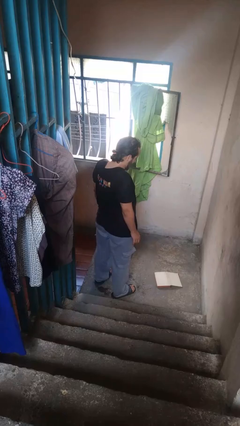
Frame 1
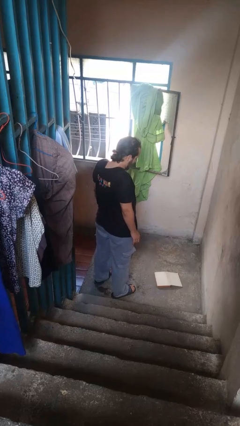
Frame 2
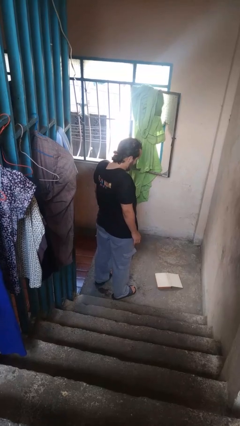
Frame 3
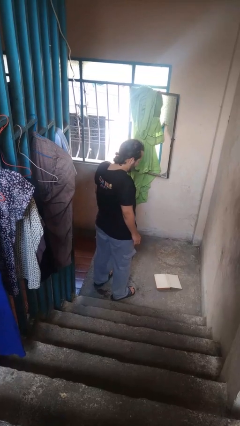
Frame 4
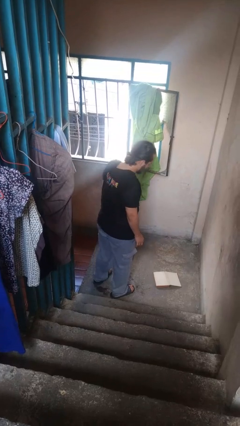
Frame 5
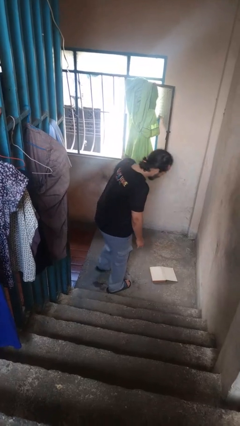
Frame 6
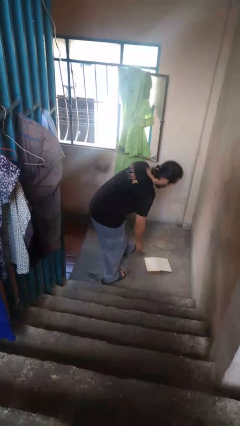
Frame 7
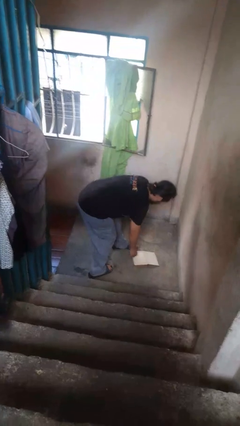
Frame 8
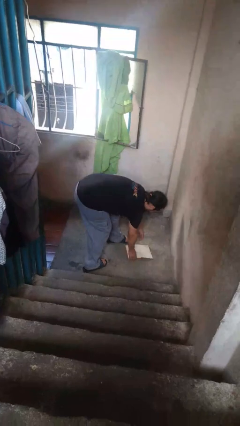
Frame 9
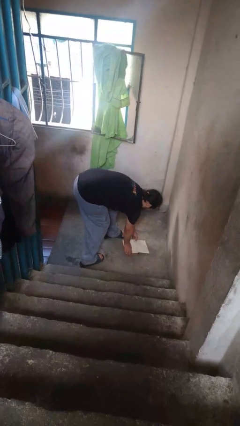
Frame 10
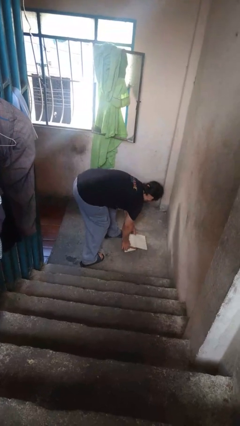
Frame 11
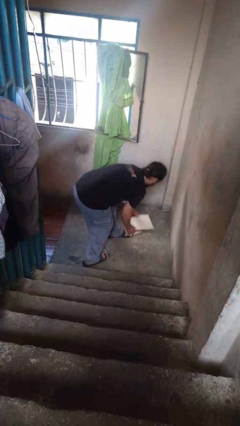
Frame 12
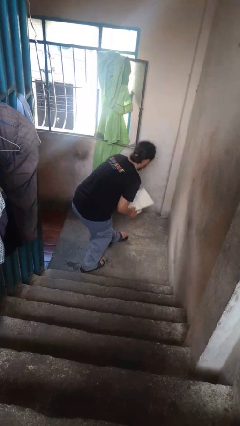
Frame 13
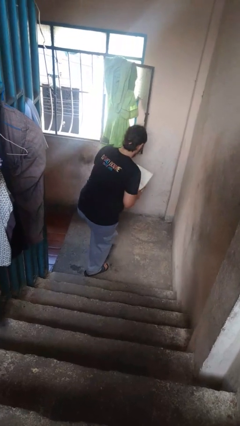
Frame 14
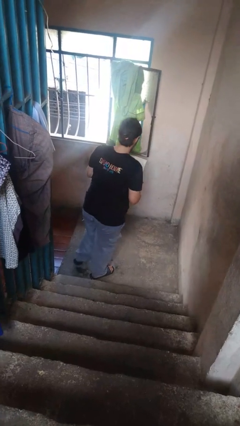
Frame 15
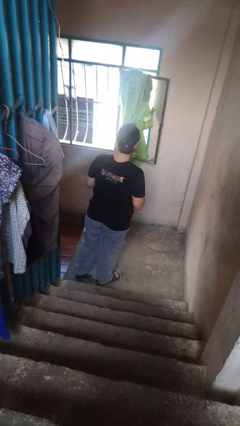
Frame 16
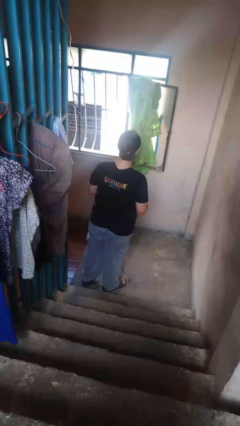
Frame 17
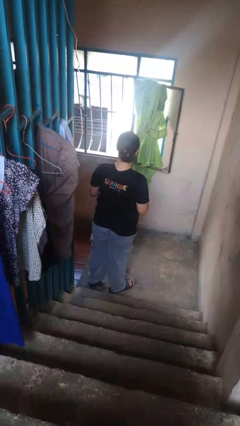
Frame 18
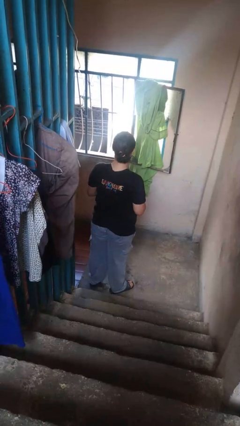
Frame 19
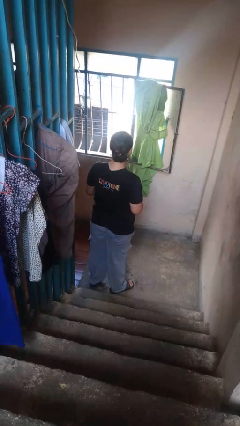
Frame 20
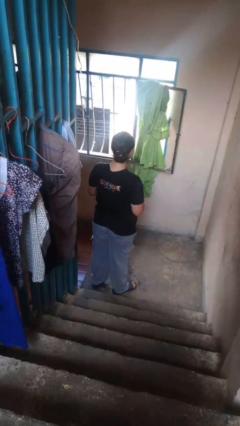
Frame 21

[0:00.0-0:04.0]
person picks up object from floor

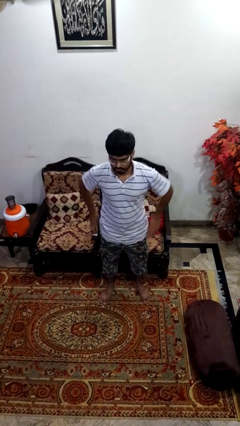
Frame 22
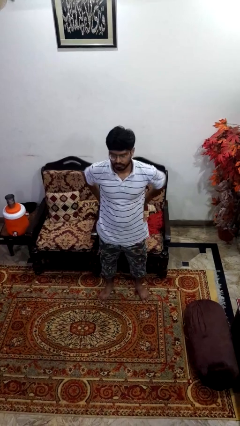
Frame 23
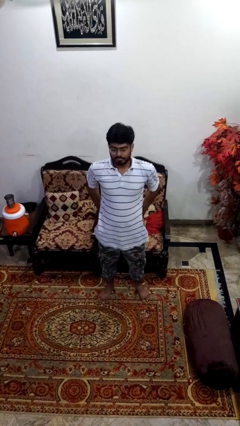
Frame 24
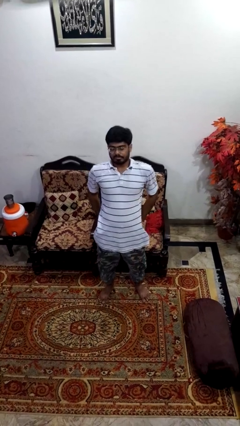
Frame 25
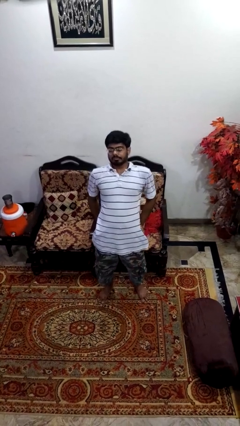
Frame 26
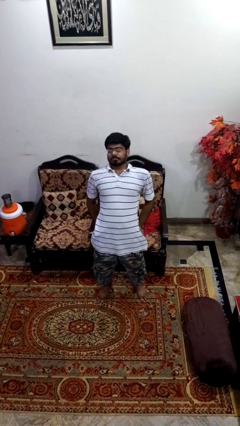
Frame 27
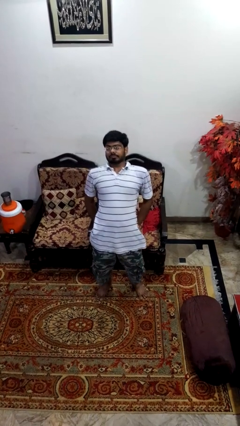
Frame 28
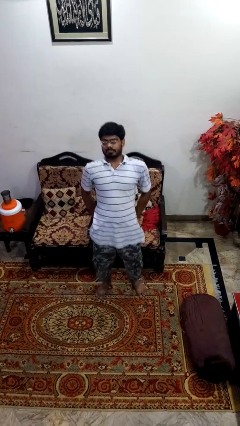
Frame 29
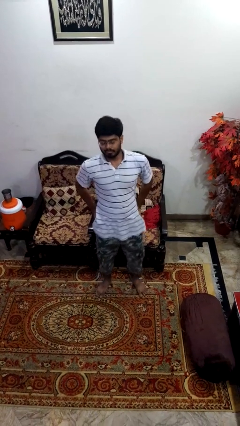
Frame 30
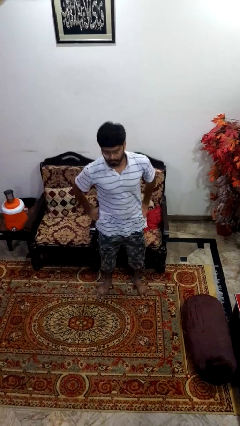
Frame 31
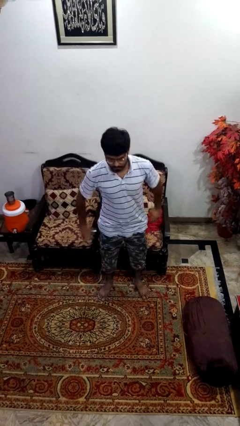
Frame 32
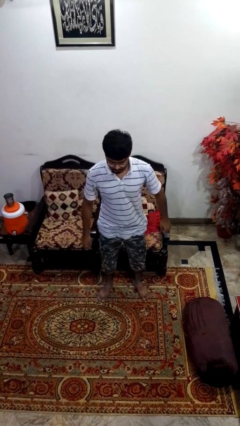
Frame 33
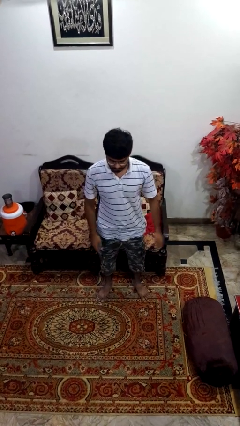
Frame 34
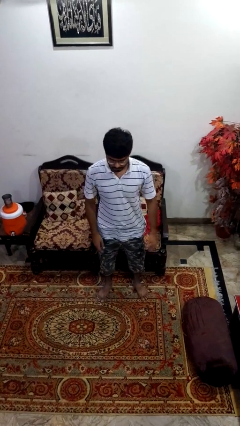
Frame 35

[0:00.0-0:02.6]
person stretches back

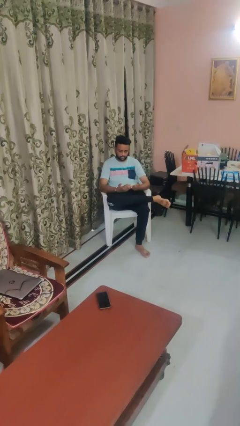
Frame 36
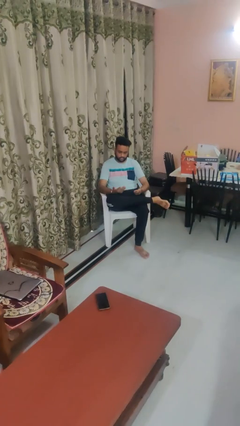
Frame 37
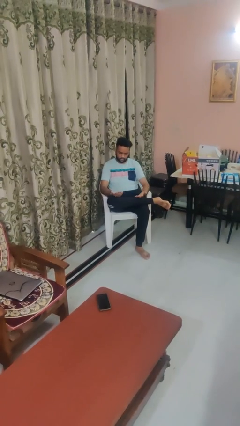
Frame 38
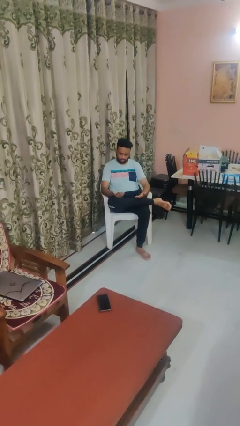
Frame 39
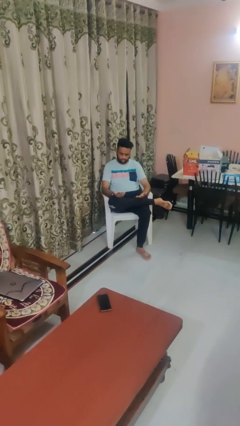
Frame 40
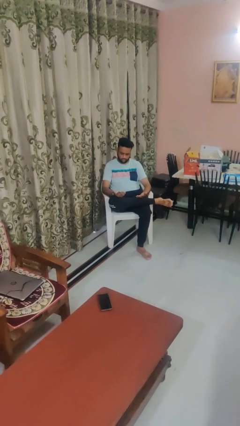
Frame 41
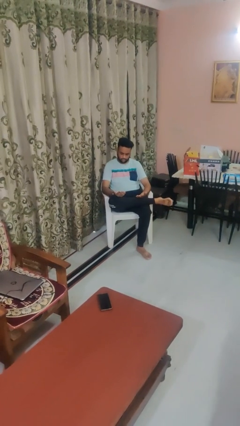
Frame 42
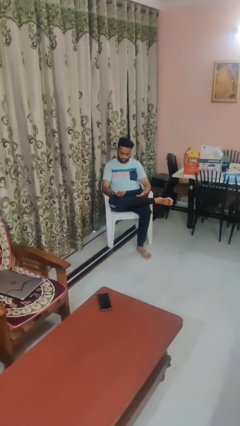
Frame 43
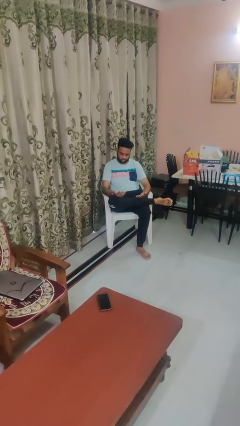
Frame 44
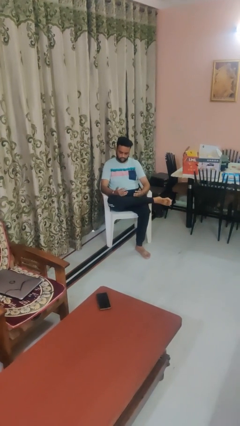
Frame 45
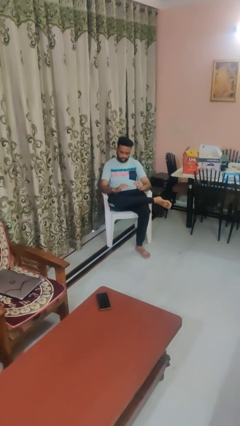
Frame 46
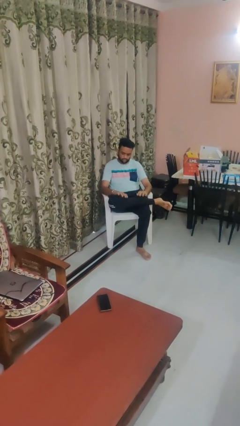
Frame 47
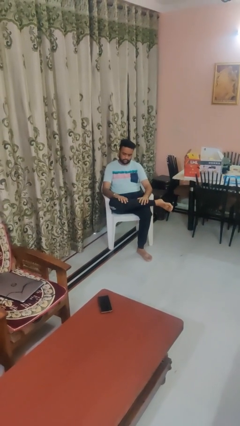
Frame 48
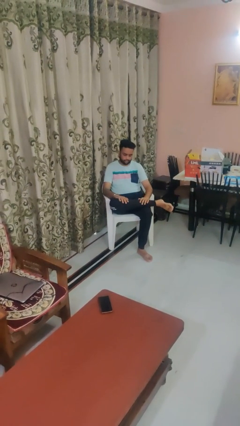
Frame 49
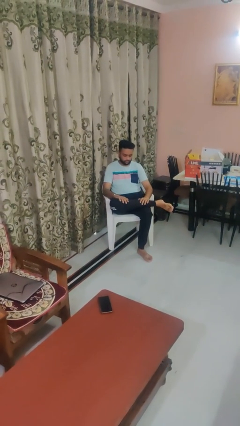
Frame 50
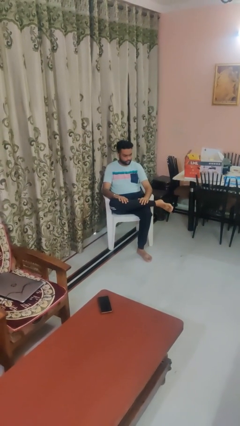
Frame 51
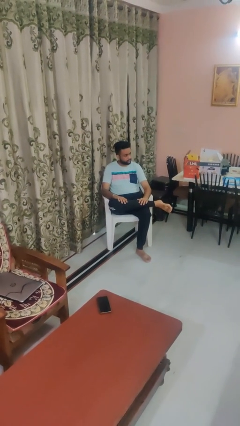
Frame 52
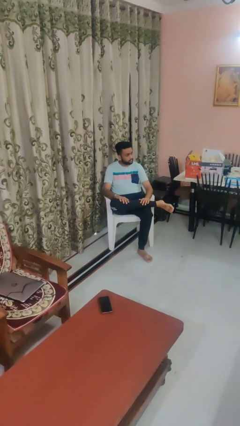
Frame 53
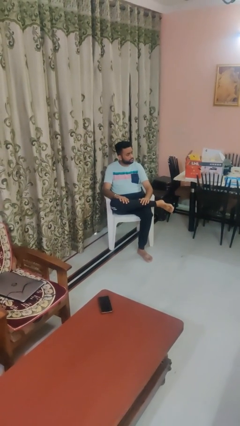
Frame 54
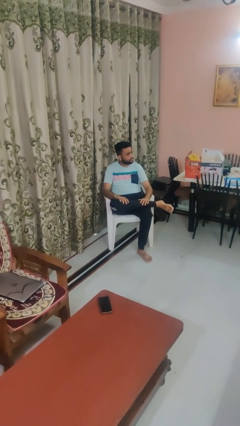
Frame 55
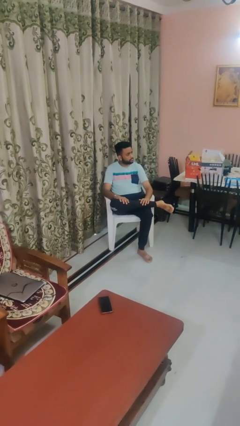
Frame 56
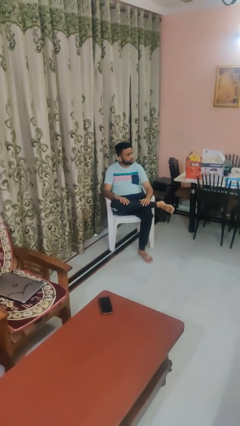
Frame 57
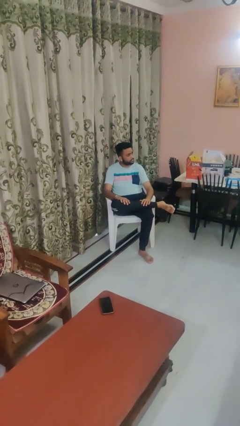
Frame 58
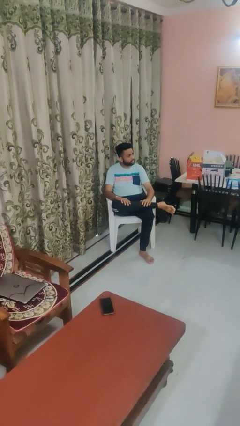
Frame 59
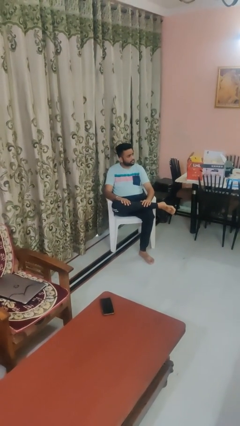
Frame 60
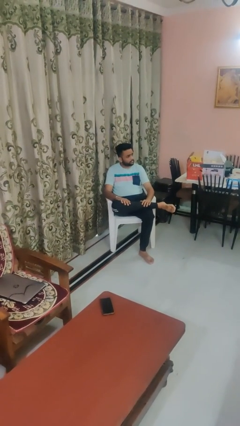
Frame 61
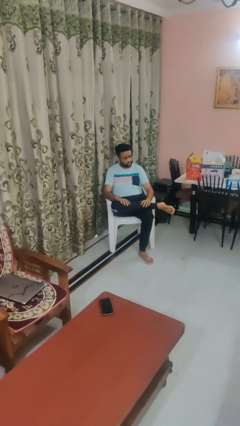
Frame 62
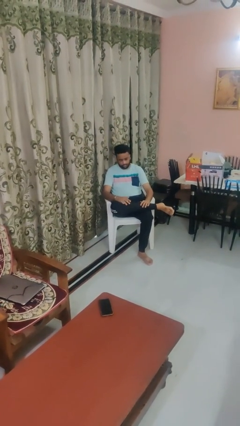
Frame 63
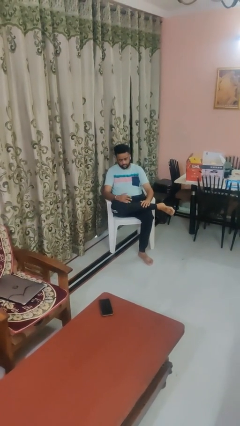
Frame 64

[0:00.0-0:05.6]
person looks at hands in lap

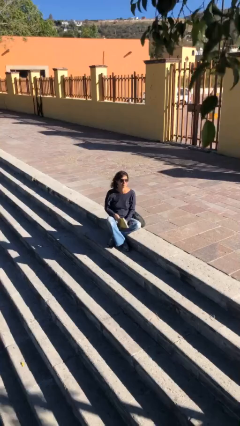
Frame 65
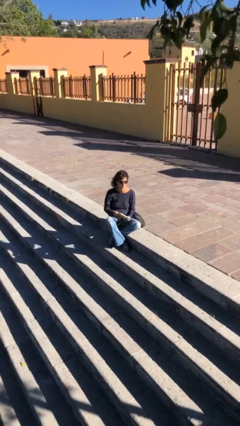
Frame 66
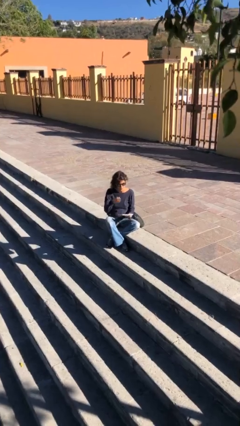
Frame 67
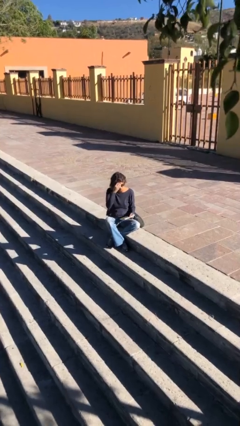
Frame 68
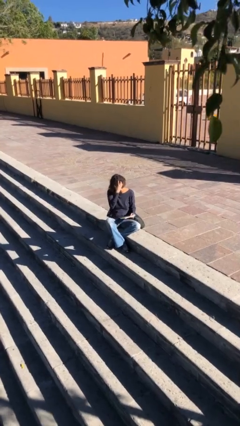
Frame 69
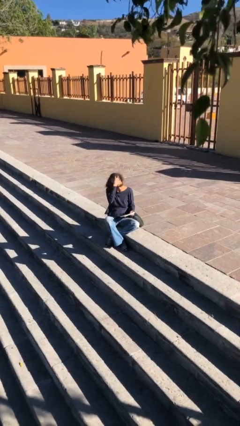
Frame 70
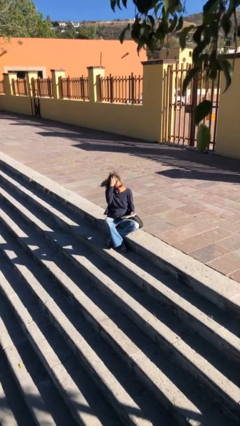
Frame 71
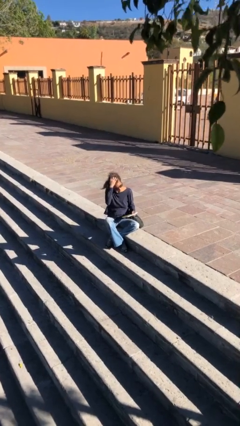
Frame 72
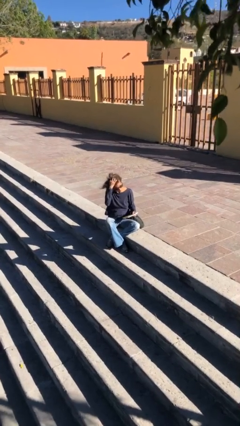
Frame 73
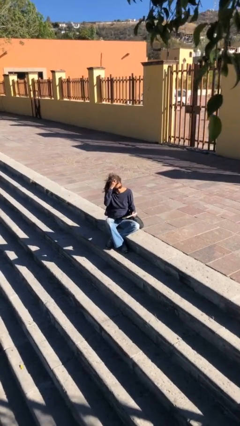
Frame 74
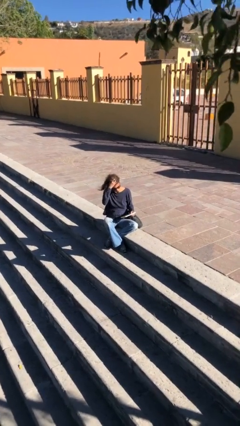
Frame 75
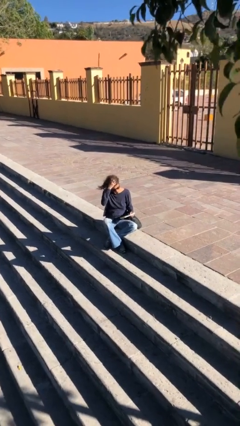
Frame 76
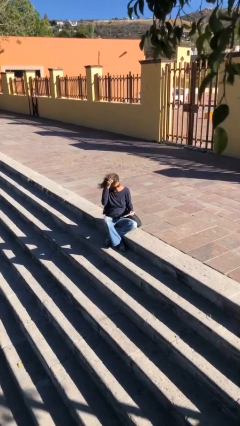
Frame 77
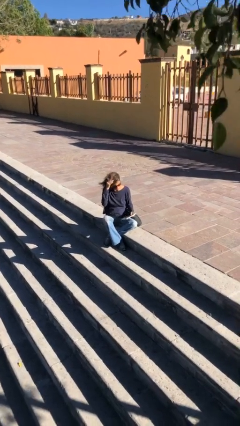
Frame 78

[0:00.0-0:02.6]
person reads document

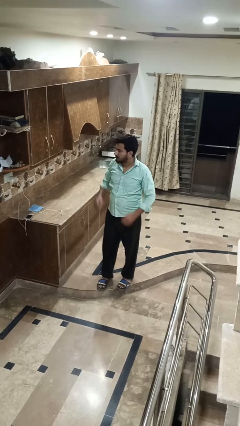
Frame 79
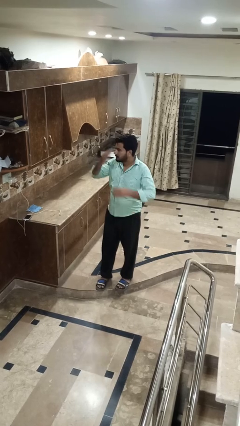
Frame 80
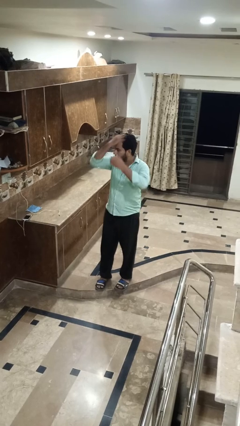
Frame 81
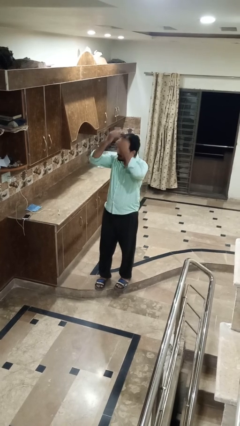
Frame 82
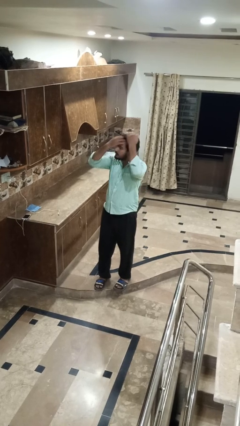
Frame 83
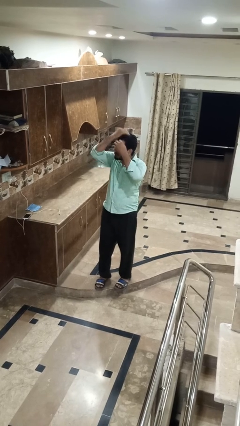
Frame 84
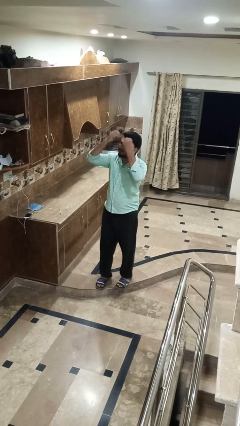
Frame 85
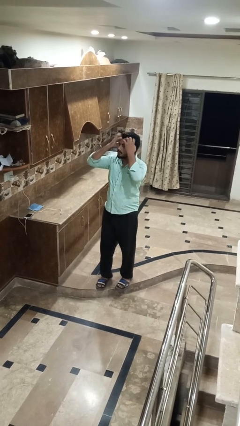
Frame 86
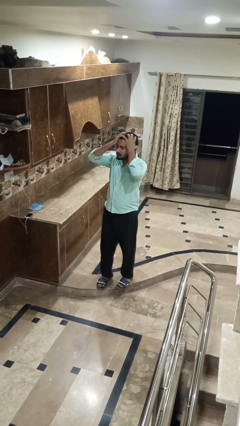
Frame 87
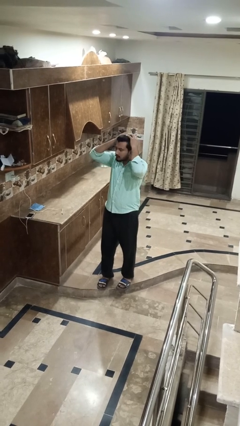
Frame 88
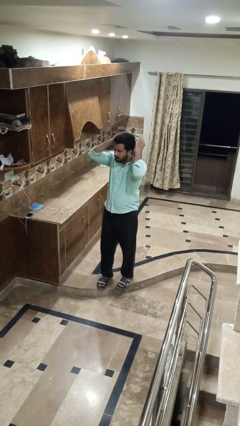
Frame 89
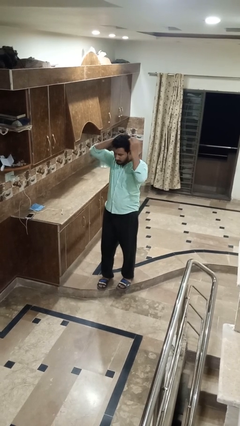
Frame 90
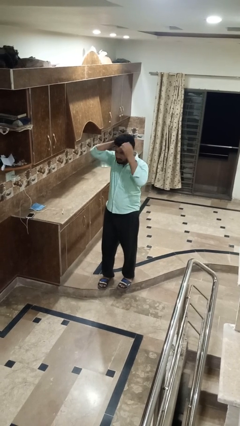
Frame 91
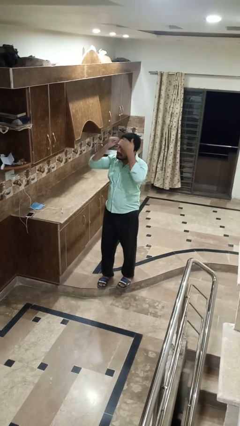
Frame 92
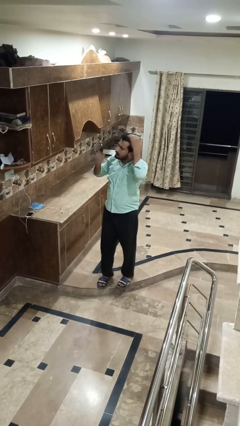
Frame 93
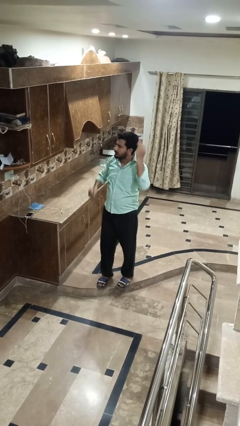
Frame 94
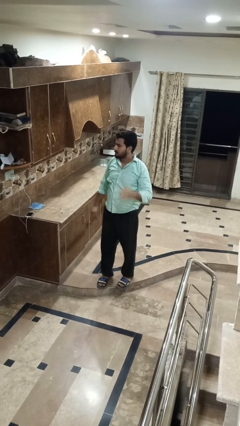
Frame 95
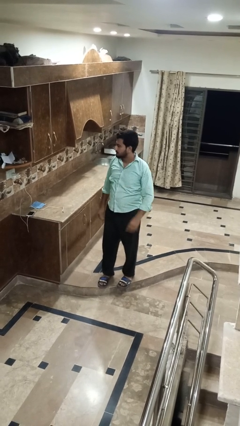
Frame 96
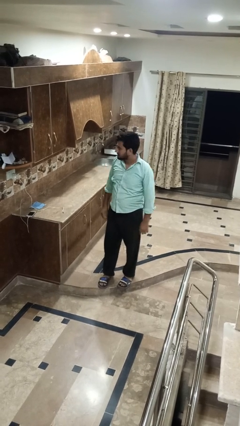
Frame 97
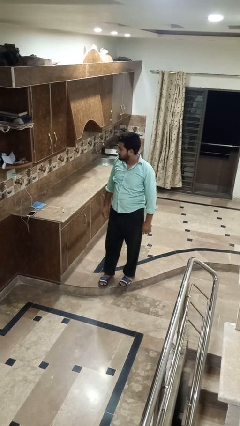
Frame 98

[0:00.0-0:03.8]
person strokes hair
